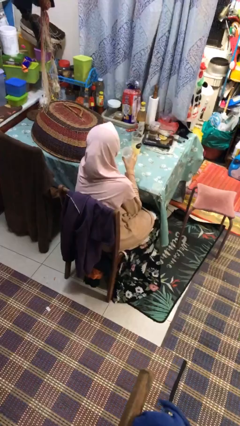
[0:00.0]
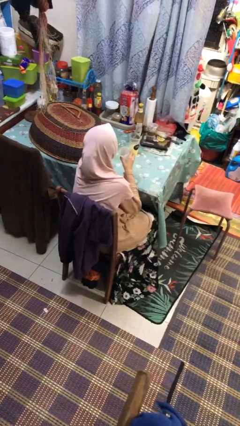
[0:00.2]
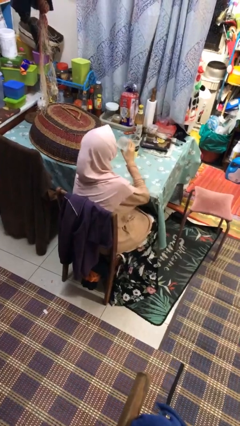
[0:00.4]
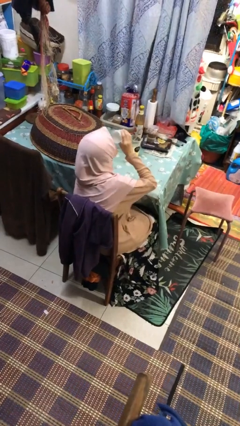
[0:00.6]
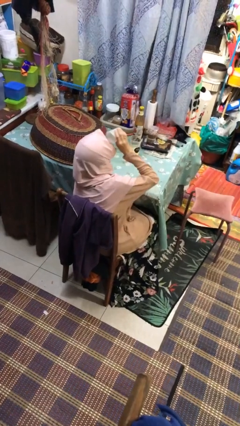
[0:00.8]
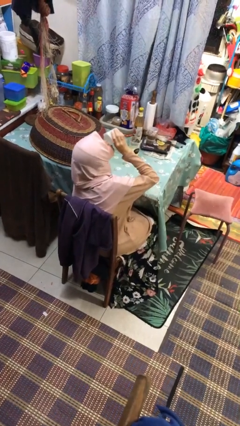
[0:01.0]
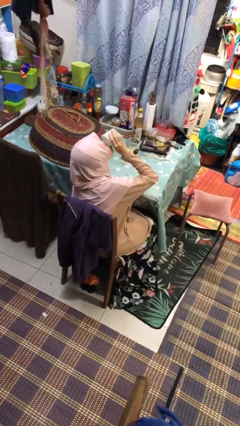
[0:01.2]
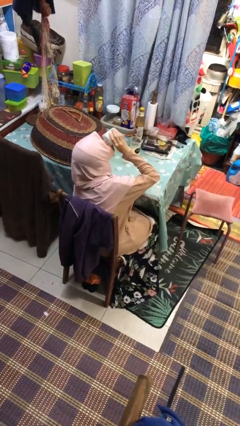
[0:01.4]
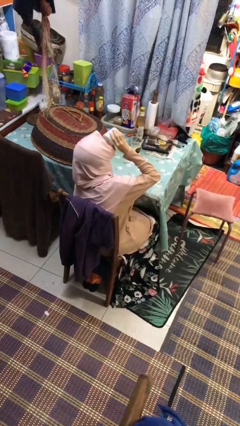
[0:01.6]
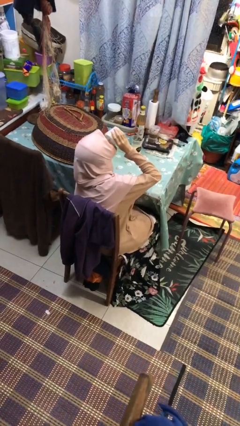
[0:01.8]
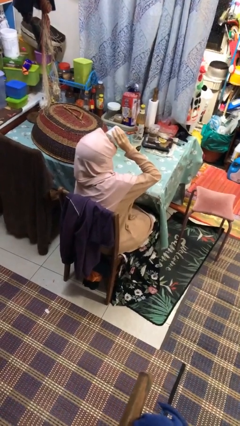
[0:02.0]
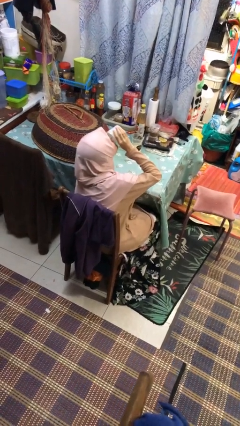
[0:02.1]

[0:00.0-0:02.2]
person drinks from shotglass

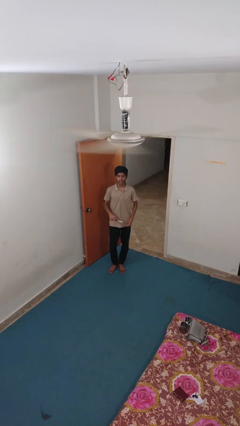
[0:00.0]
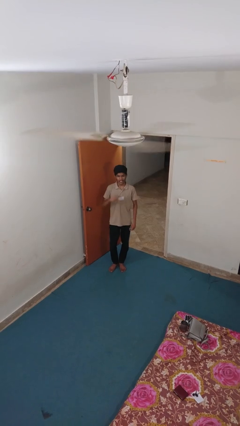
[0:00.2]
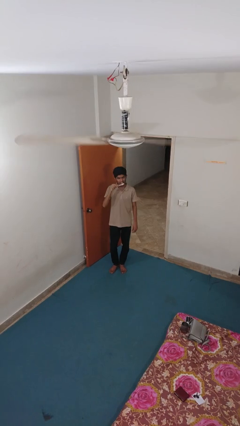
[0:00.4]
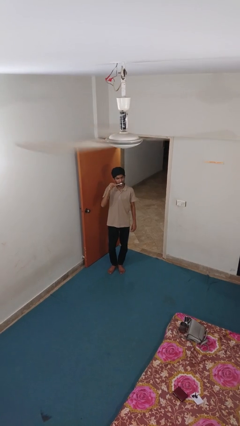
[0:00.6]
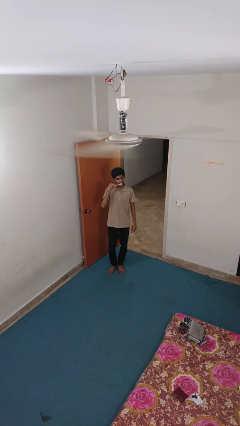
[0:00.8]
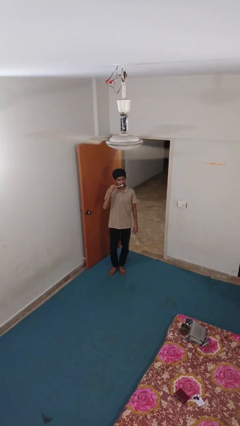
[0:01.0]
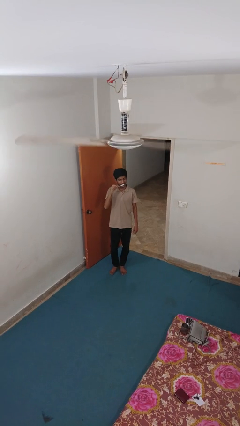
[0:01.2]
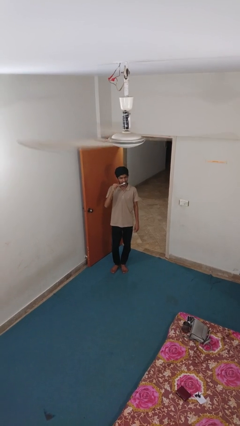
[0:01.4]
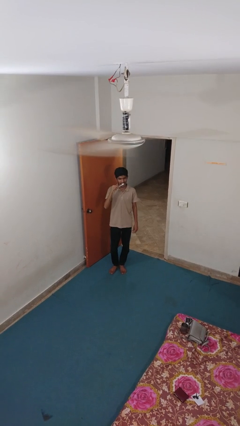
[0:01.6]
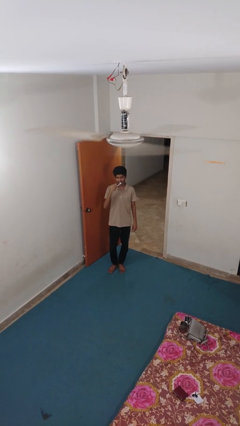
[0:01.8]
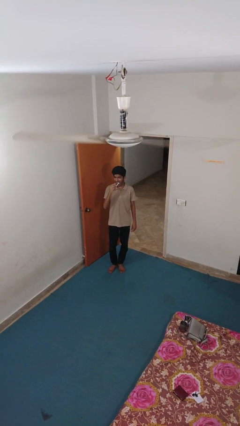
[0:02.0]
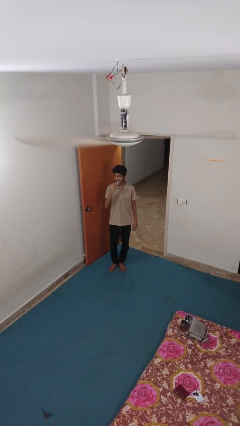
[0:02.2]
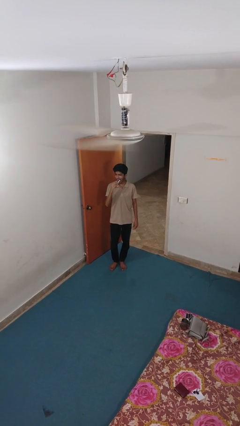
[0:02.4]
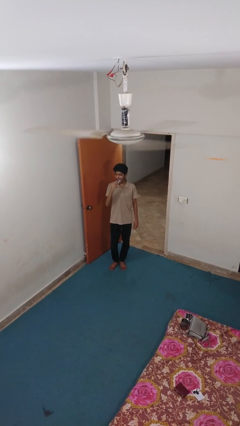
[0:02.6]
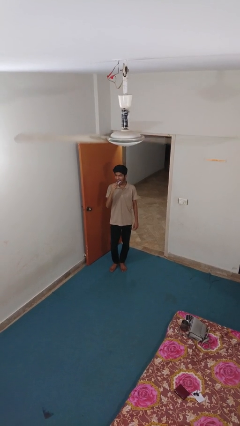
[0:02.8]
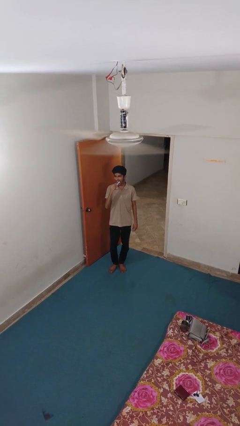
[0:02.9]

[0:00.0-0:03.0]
person brushes teeth

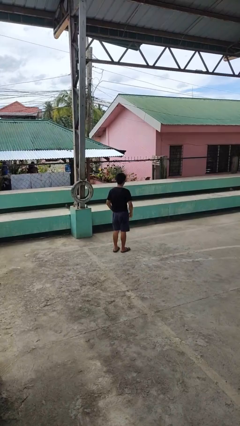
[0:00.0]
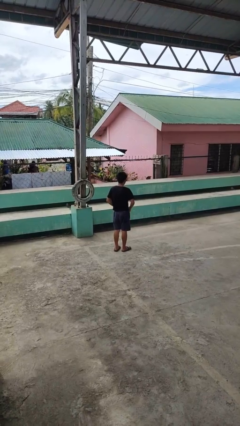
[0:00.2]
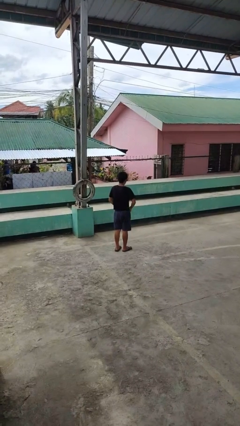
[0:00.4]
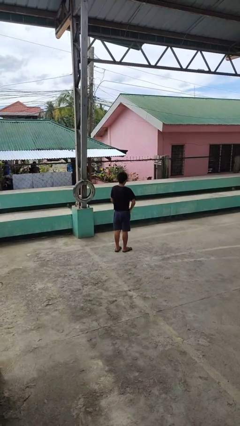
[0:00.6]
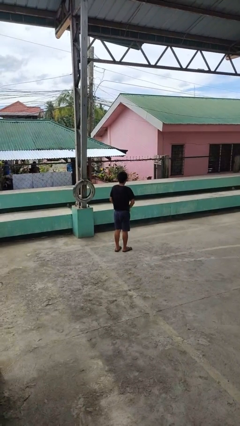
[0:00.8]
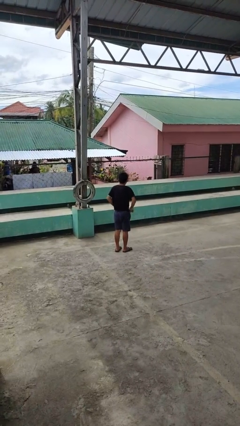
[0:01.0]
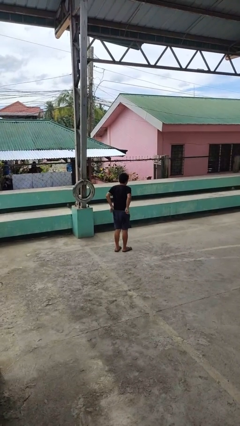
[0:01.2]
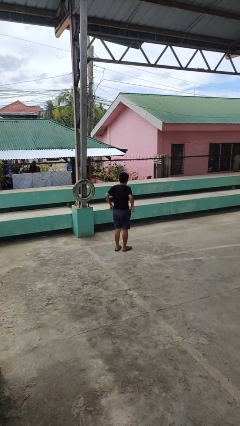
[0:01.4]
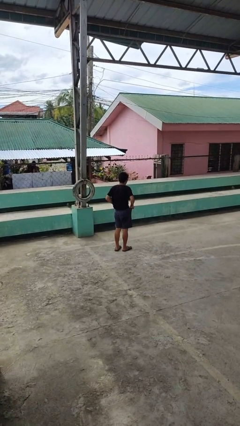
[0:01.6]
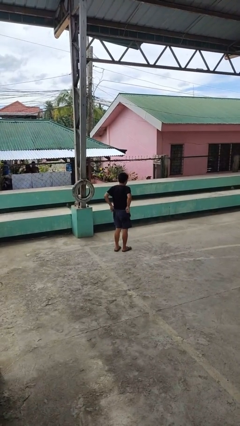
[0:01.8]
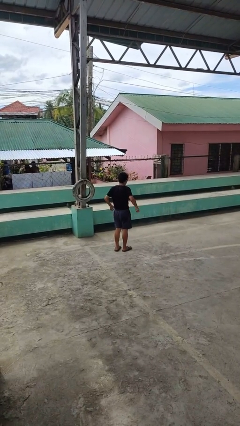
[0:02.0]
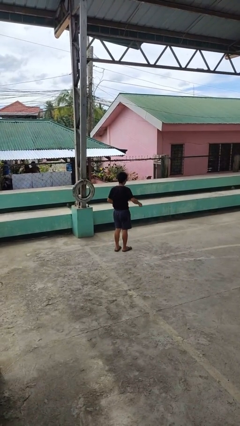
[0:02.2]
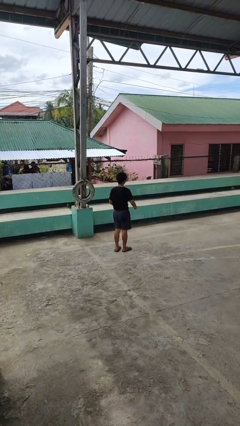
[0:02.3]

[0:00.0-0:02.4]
person hikes up pants

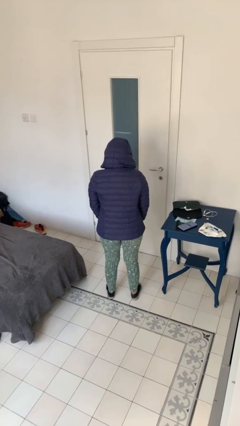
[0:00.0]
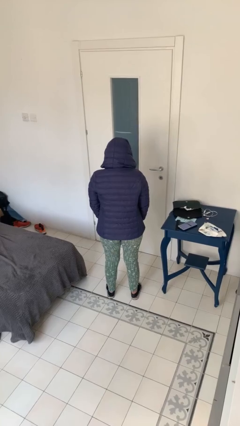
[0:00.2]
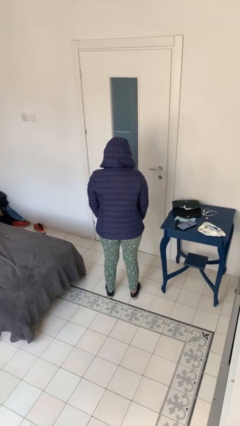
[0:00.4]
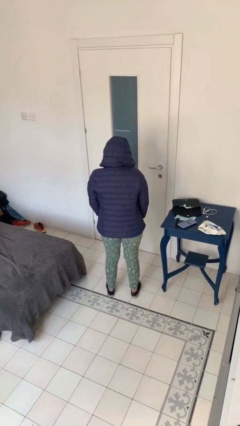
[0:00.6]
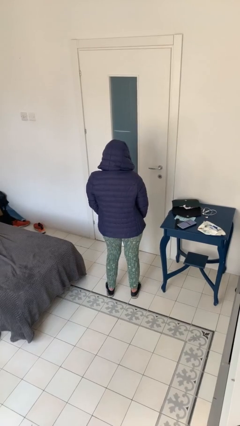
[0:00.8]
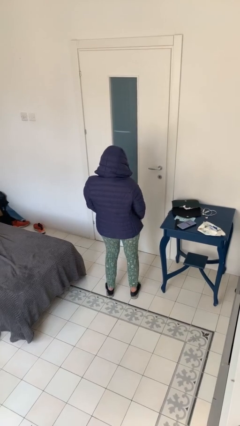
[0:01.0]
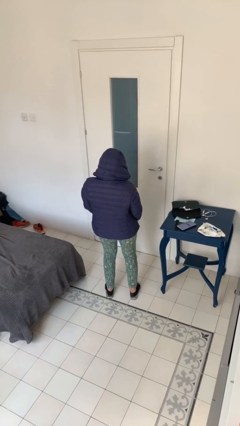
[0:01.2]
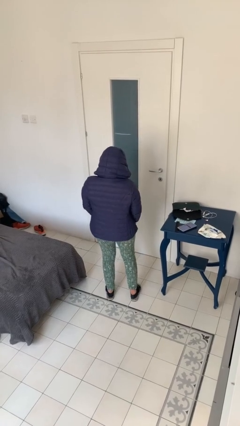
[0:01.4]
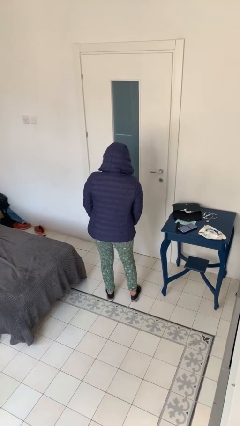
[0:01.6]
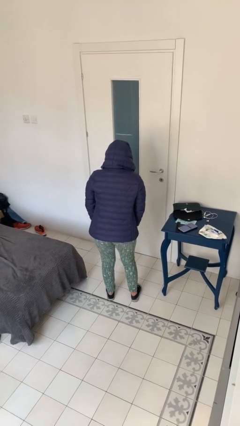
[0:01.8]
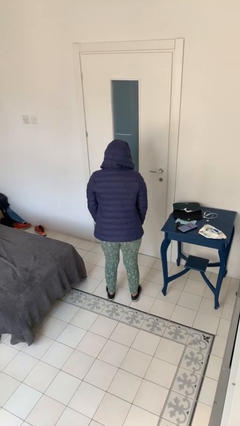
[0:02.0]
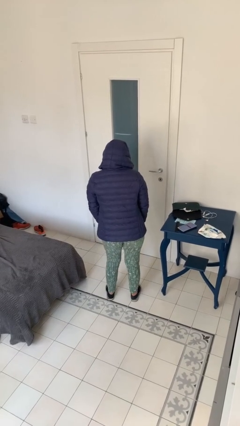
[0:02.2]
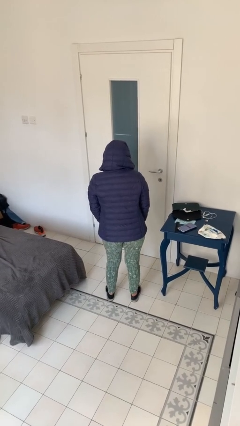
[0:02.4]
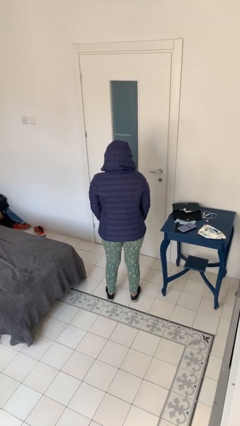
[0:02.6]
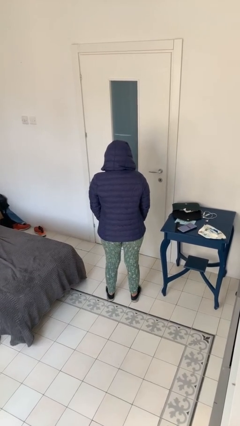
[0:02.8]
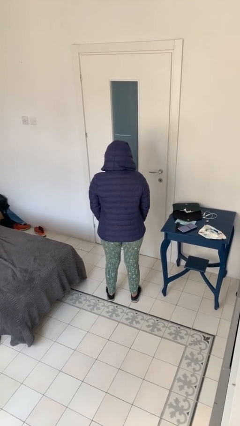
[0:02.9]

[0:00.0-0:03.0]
person wiggles hips

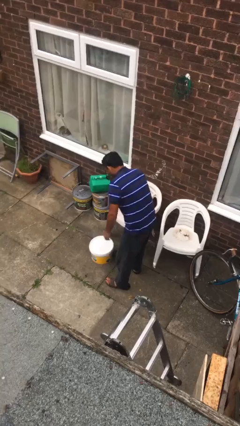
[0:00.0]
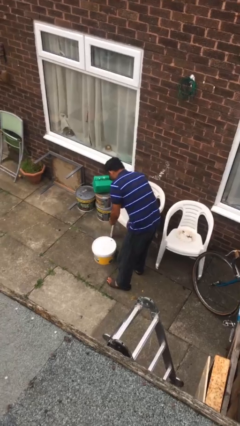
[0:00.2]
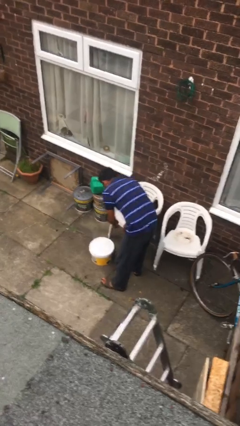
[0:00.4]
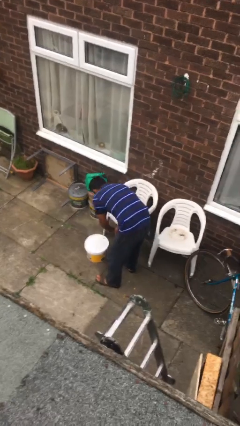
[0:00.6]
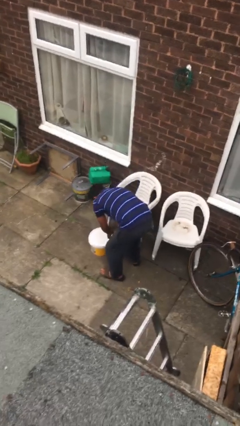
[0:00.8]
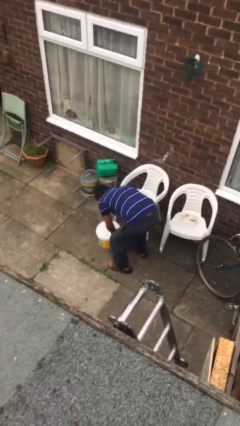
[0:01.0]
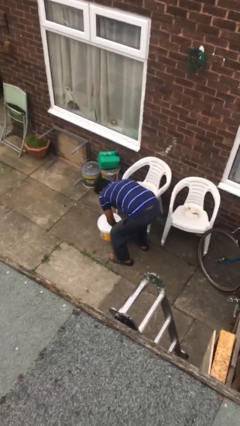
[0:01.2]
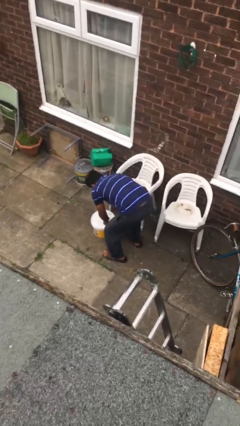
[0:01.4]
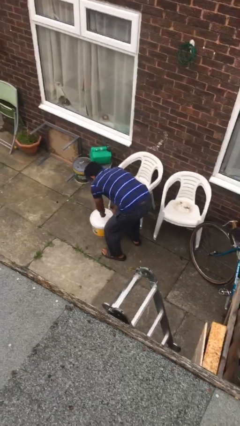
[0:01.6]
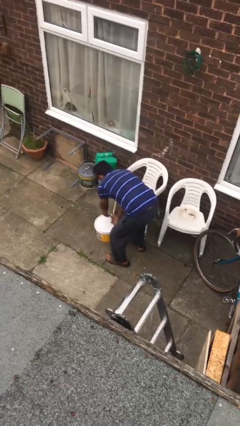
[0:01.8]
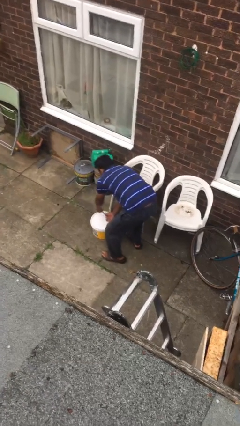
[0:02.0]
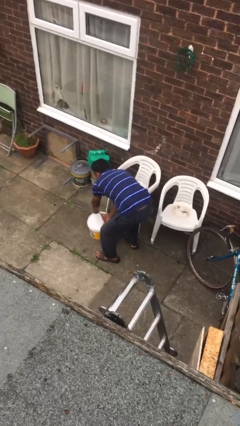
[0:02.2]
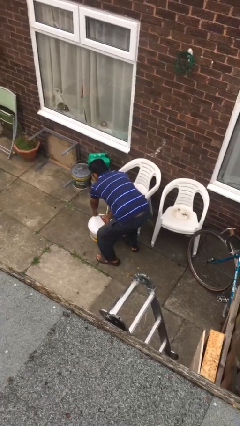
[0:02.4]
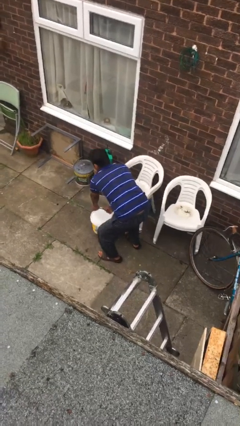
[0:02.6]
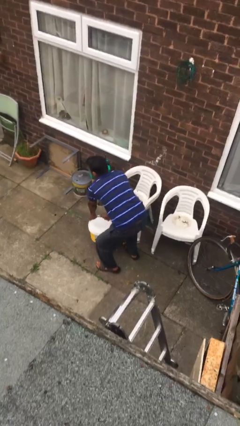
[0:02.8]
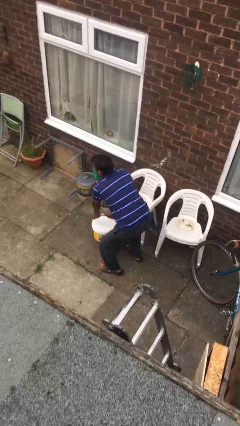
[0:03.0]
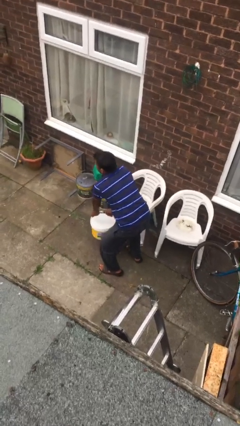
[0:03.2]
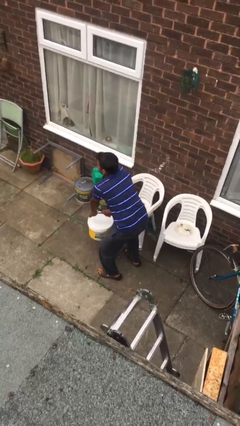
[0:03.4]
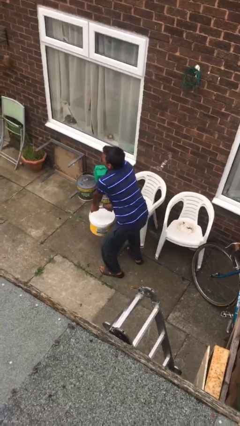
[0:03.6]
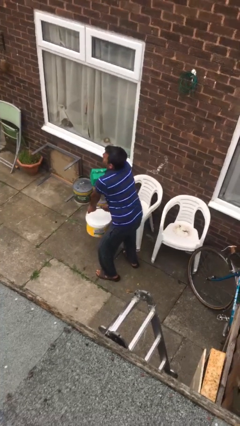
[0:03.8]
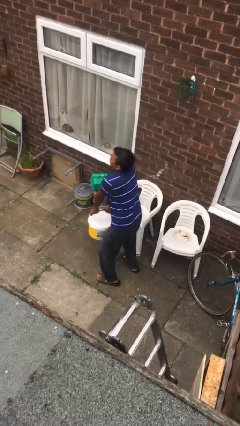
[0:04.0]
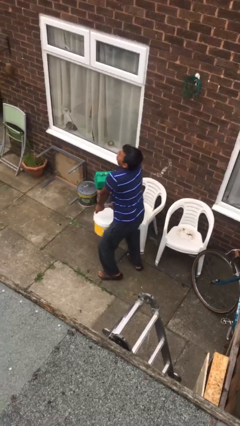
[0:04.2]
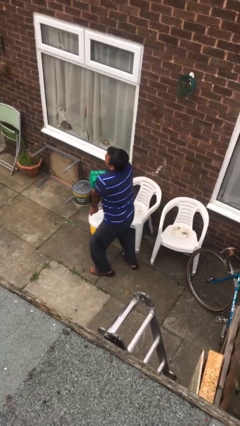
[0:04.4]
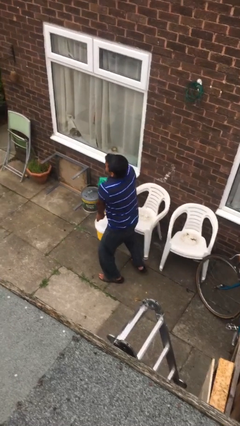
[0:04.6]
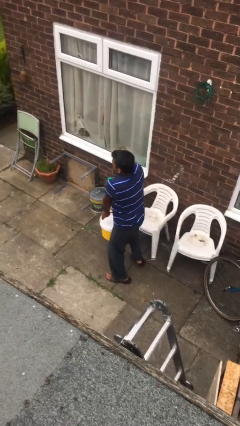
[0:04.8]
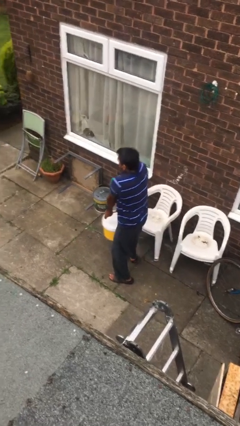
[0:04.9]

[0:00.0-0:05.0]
person picks up object from floor

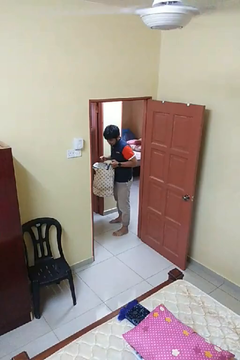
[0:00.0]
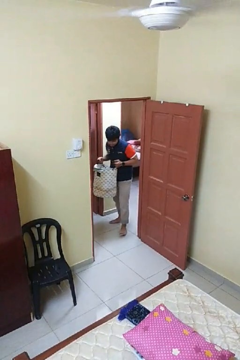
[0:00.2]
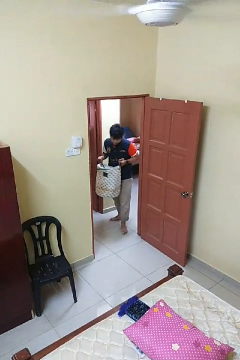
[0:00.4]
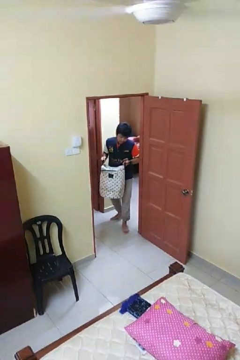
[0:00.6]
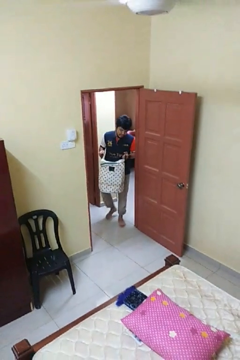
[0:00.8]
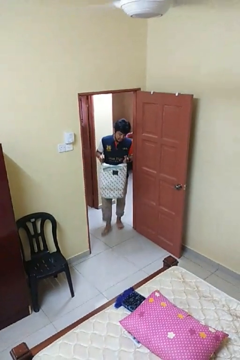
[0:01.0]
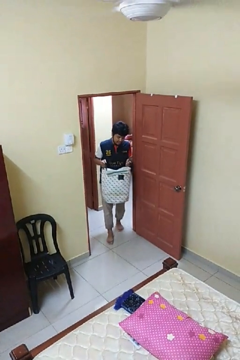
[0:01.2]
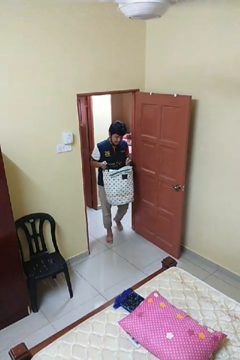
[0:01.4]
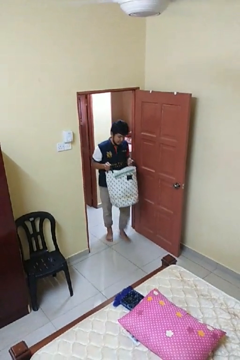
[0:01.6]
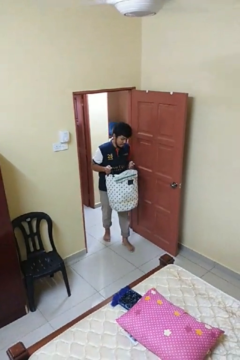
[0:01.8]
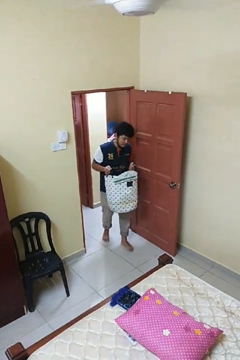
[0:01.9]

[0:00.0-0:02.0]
person carries laundry basket
